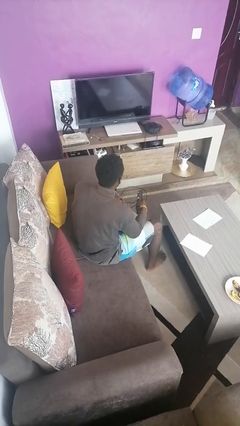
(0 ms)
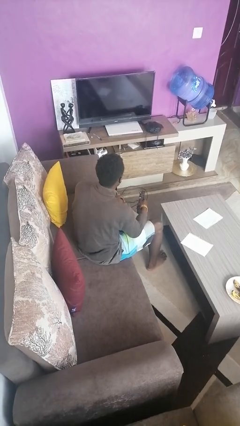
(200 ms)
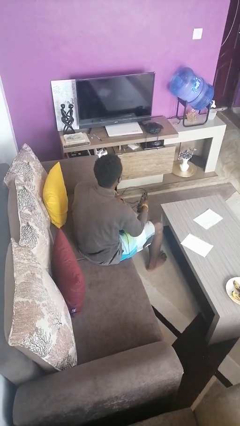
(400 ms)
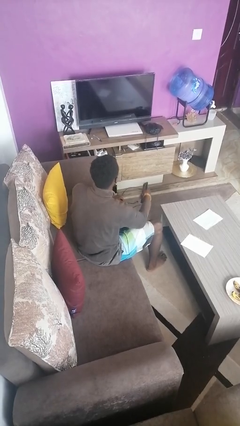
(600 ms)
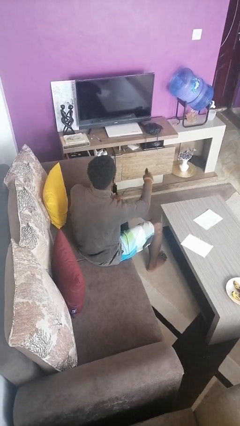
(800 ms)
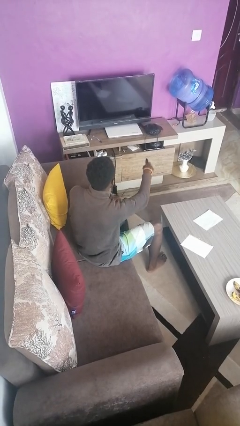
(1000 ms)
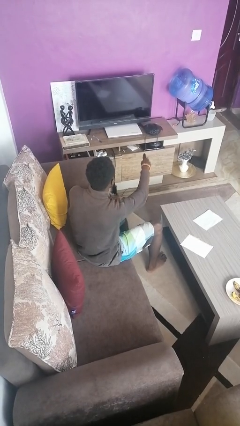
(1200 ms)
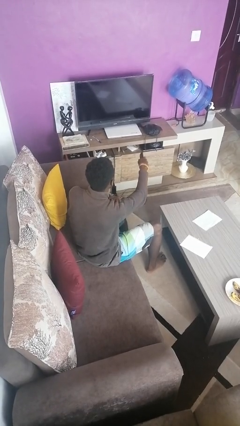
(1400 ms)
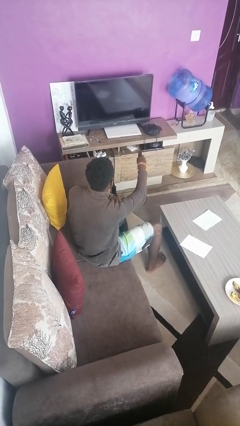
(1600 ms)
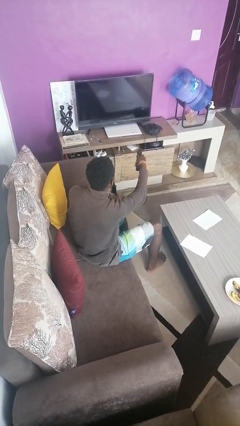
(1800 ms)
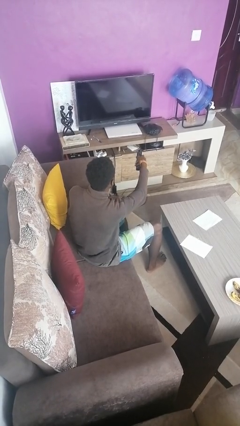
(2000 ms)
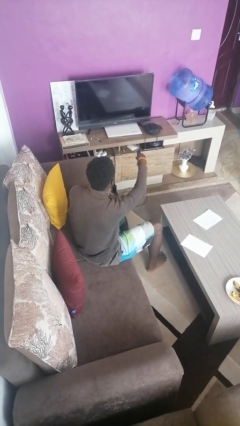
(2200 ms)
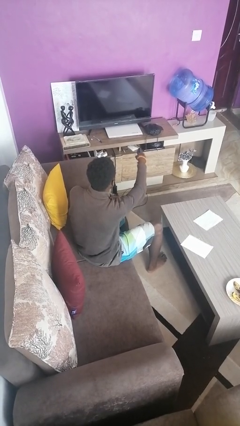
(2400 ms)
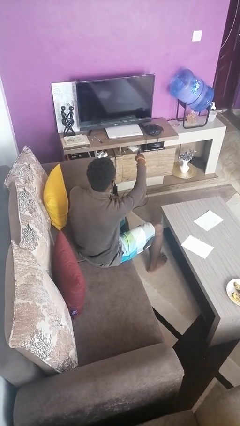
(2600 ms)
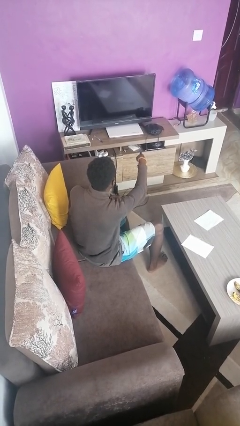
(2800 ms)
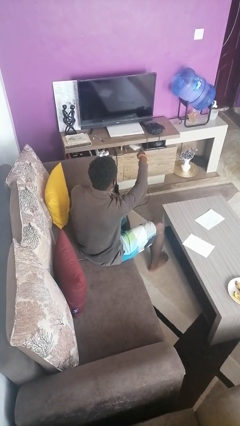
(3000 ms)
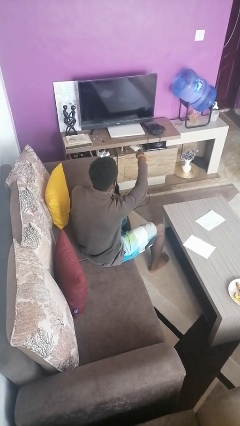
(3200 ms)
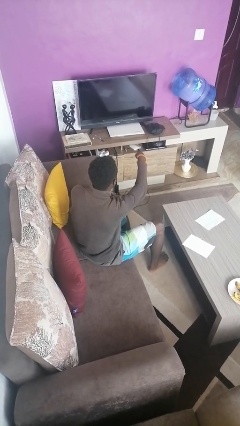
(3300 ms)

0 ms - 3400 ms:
person uses television remote

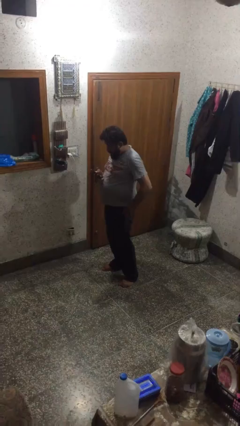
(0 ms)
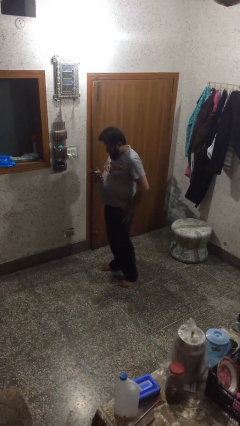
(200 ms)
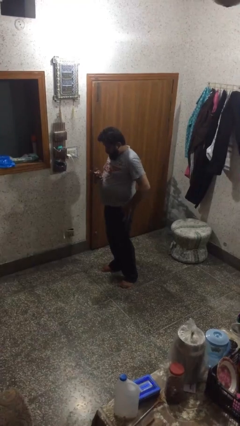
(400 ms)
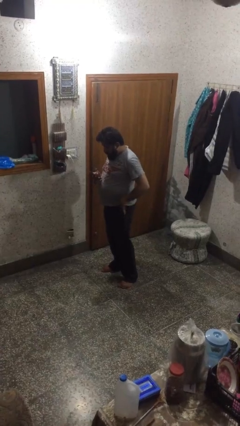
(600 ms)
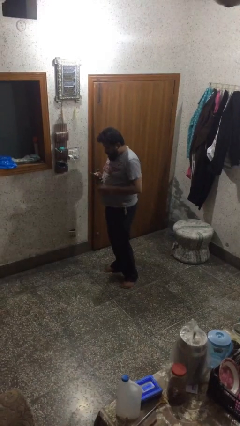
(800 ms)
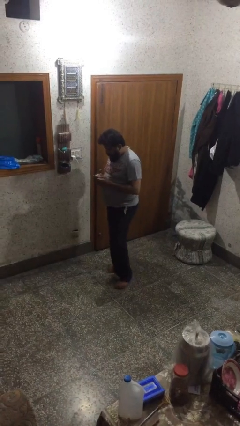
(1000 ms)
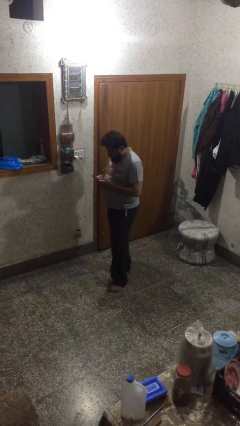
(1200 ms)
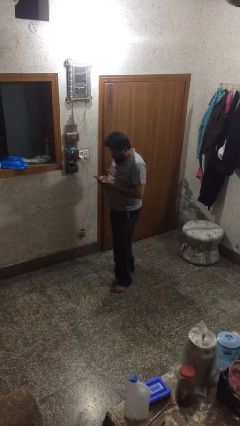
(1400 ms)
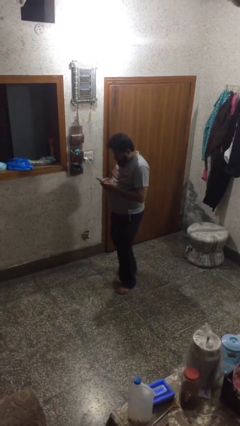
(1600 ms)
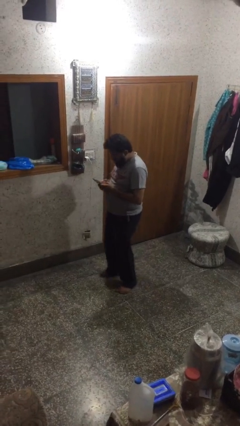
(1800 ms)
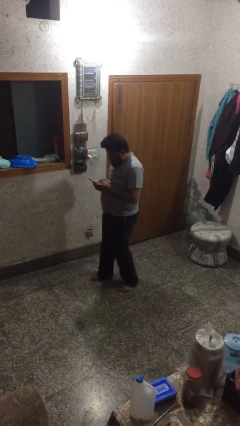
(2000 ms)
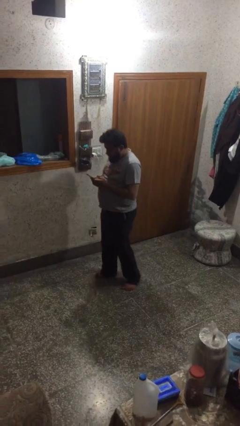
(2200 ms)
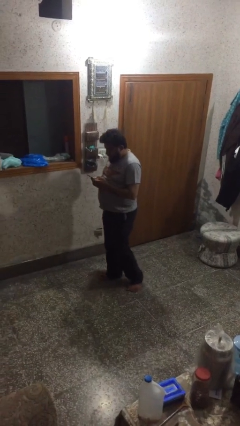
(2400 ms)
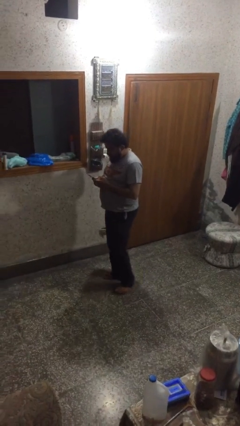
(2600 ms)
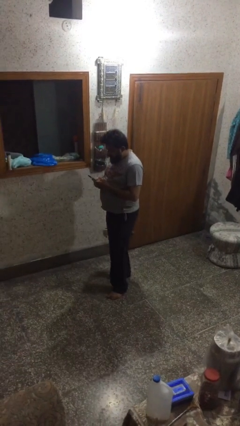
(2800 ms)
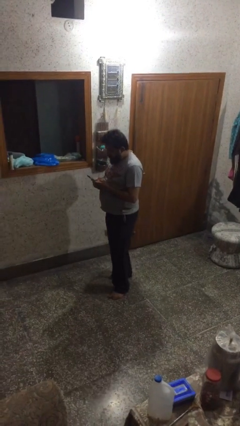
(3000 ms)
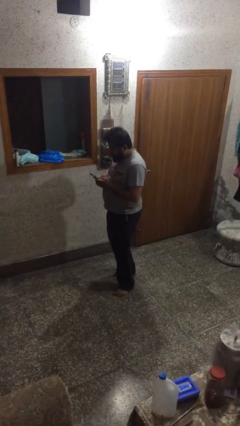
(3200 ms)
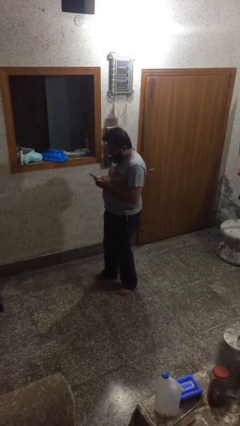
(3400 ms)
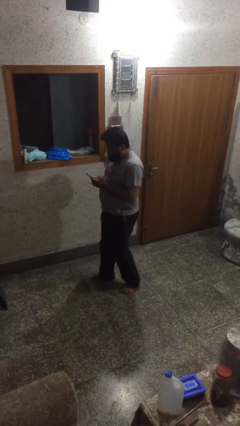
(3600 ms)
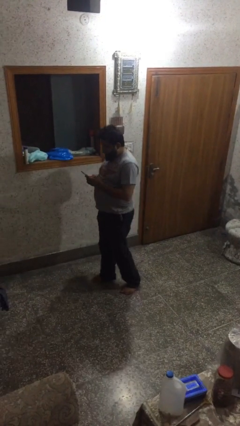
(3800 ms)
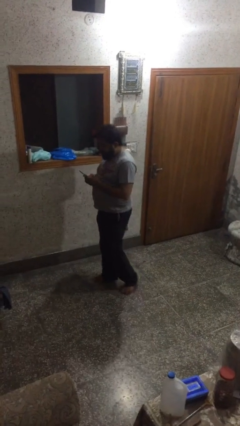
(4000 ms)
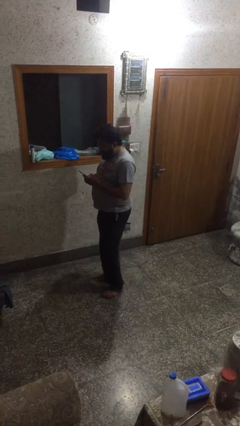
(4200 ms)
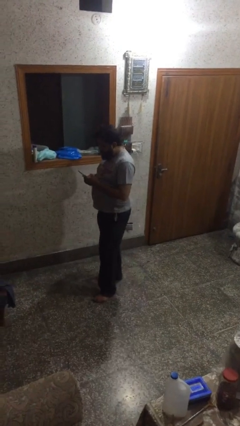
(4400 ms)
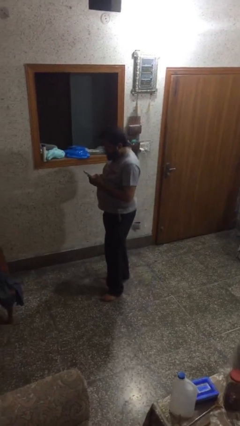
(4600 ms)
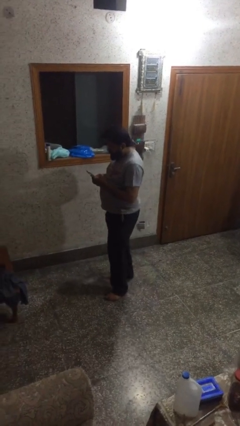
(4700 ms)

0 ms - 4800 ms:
person texts on phone

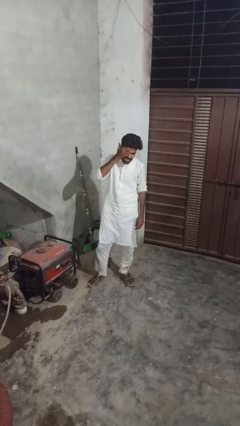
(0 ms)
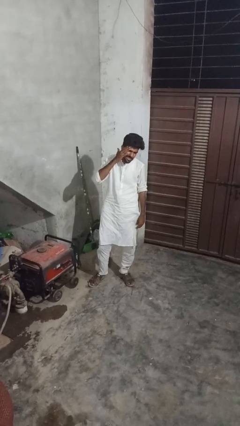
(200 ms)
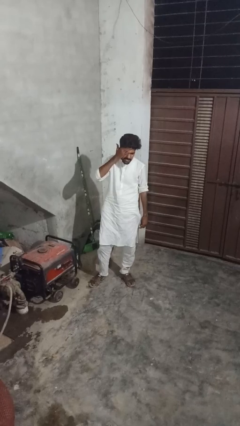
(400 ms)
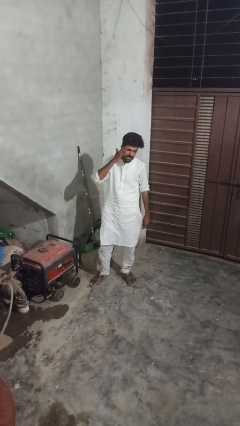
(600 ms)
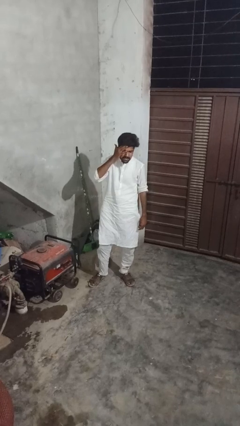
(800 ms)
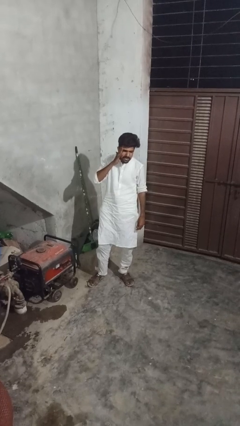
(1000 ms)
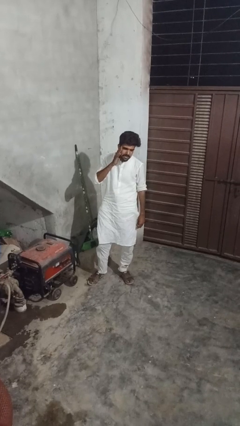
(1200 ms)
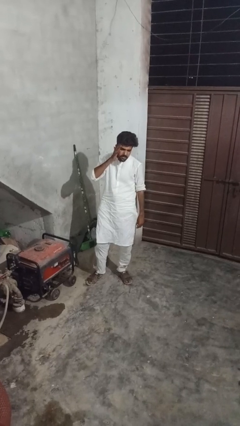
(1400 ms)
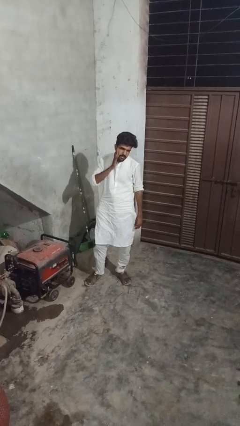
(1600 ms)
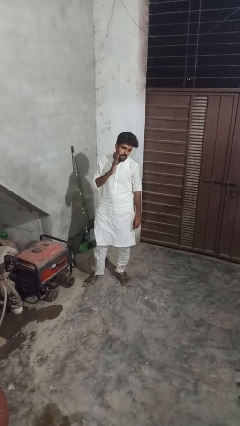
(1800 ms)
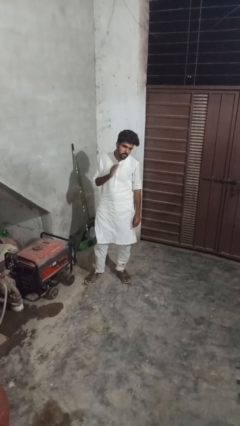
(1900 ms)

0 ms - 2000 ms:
person scratches face

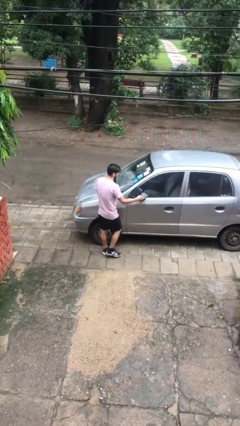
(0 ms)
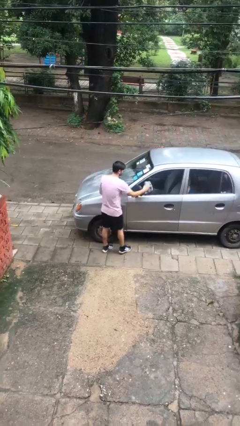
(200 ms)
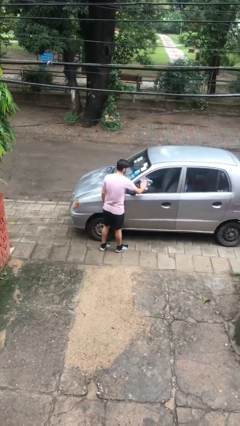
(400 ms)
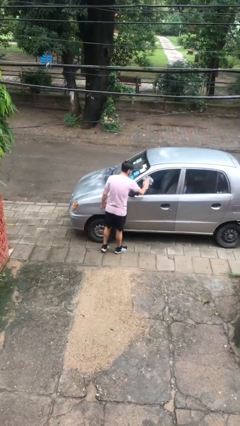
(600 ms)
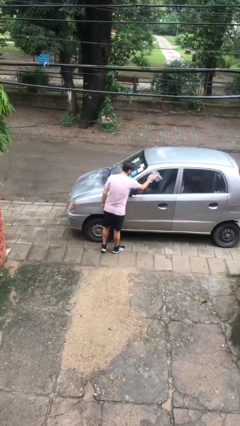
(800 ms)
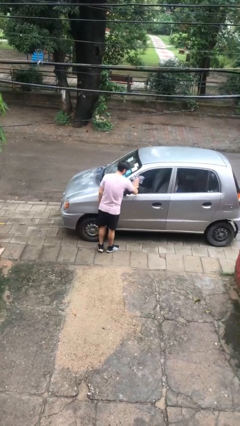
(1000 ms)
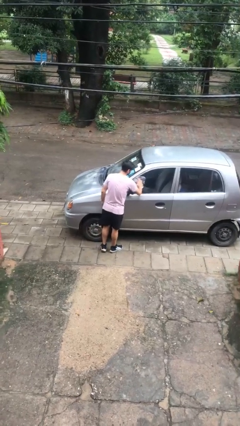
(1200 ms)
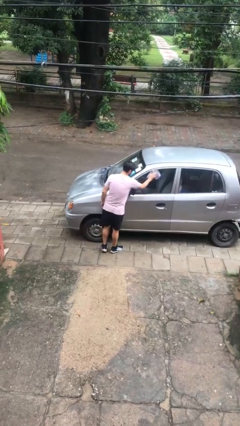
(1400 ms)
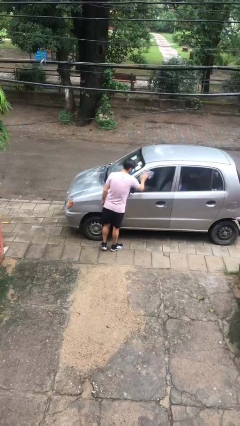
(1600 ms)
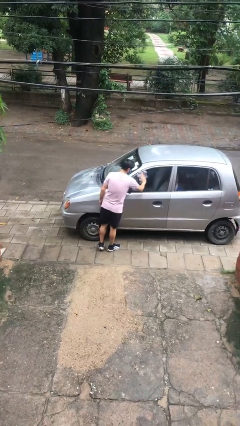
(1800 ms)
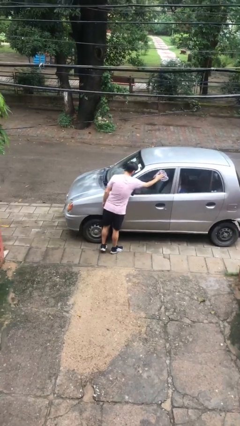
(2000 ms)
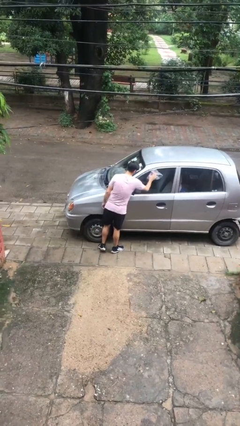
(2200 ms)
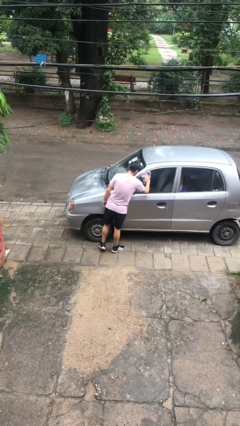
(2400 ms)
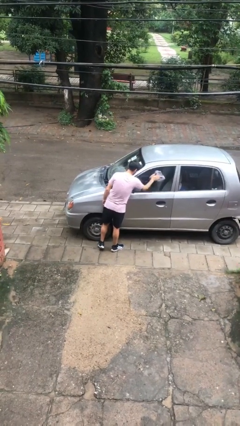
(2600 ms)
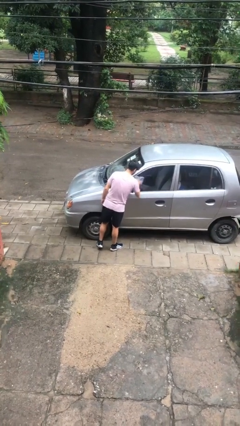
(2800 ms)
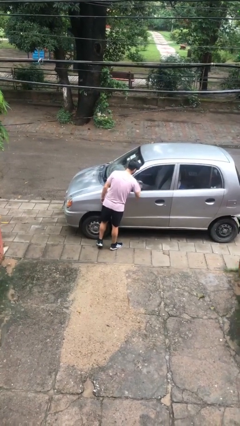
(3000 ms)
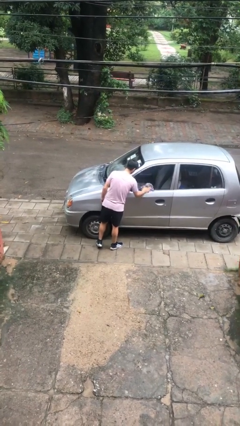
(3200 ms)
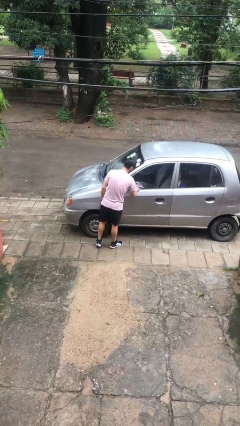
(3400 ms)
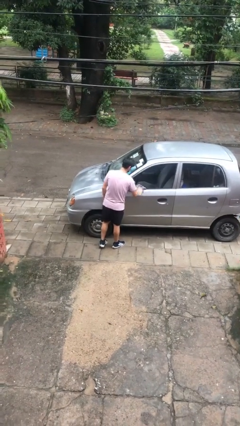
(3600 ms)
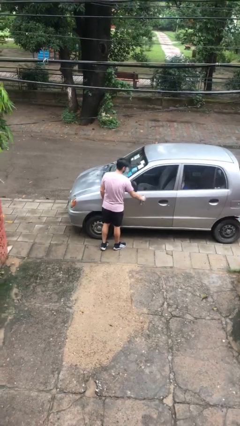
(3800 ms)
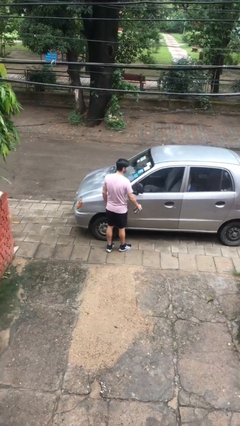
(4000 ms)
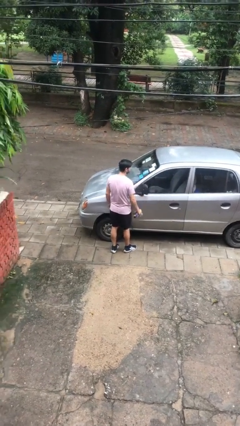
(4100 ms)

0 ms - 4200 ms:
person polishes car with rag

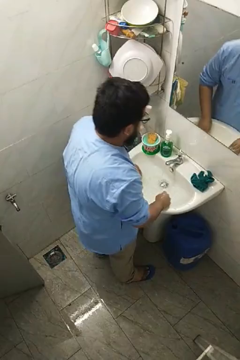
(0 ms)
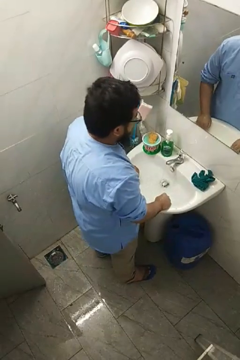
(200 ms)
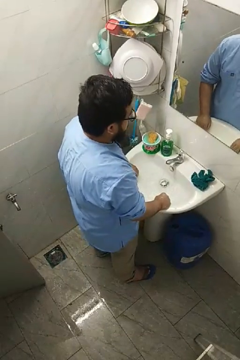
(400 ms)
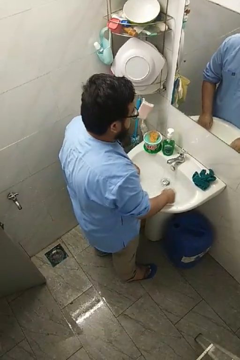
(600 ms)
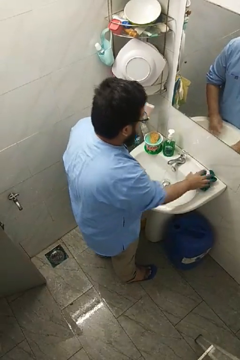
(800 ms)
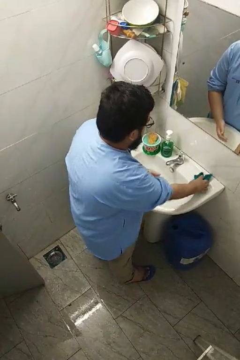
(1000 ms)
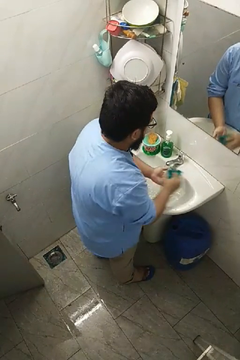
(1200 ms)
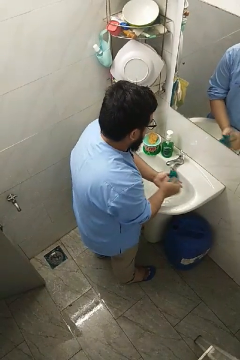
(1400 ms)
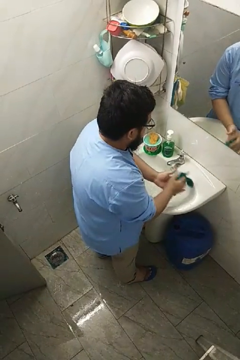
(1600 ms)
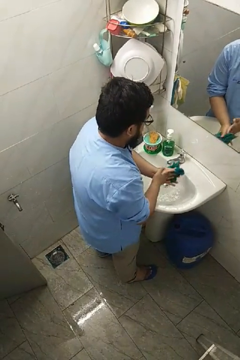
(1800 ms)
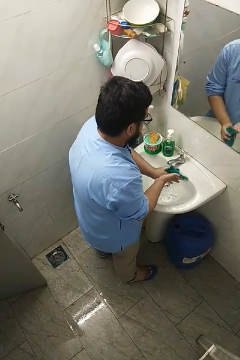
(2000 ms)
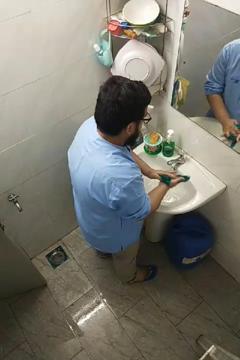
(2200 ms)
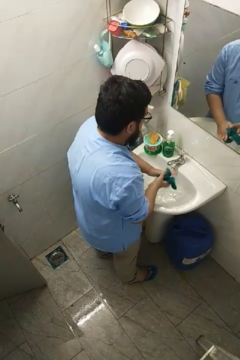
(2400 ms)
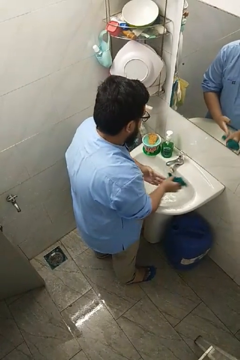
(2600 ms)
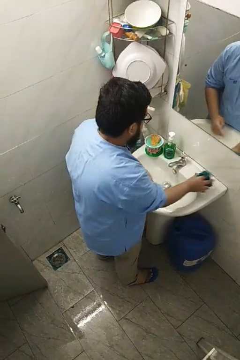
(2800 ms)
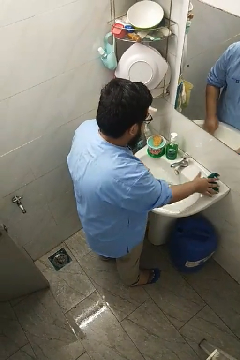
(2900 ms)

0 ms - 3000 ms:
person dries hands with towel

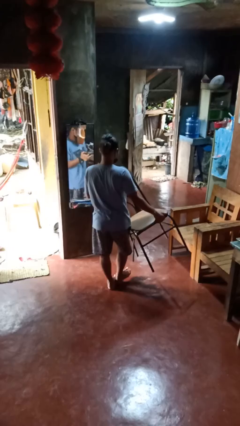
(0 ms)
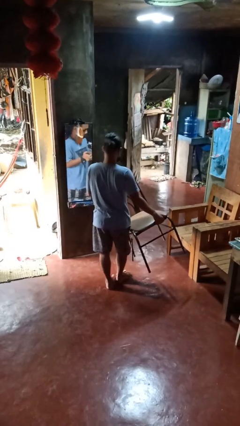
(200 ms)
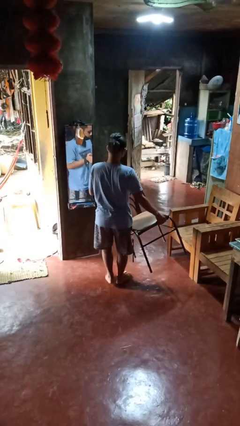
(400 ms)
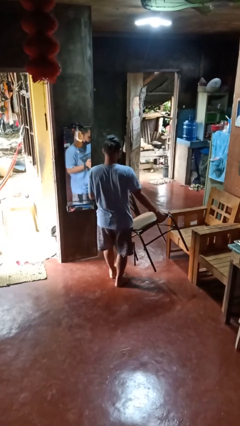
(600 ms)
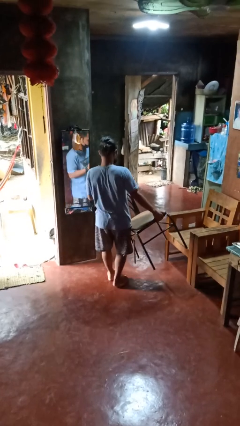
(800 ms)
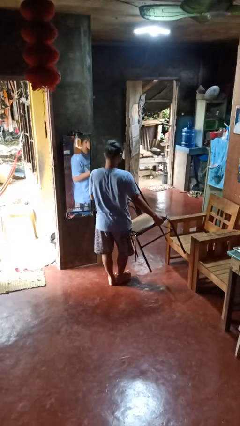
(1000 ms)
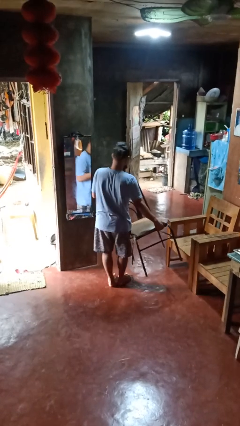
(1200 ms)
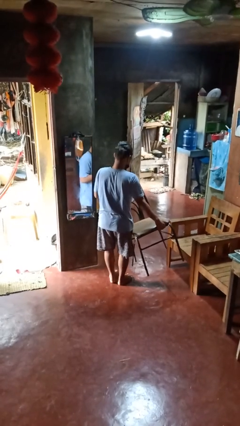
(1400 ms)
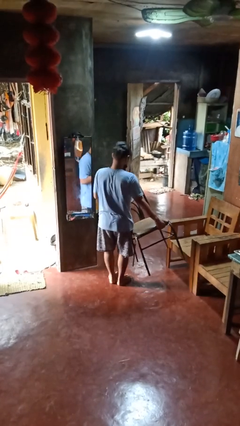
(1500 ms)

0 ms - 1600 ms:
person carries furniture
